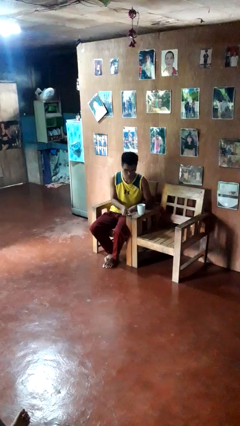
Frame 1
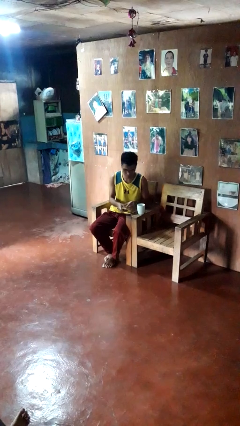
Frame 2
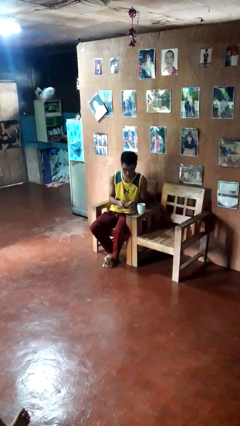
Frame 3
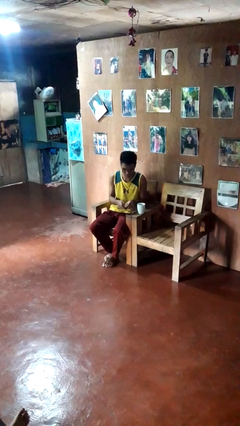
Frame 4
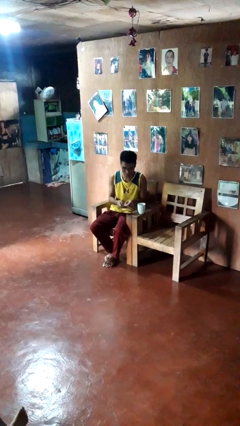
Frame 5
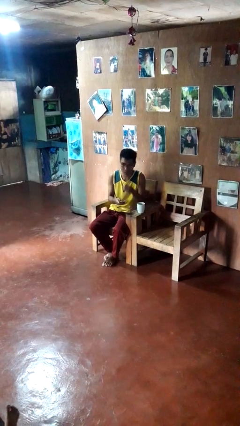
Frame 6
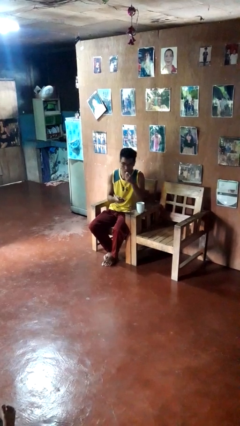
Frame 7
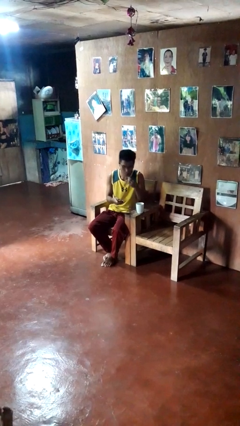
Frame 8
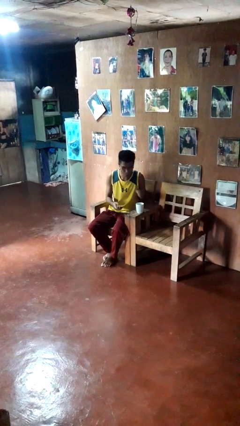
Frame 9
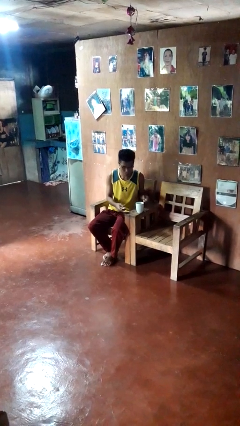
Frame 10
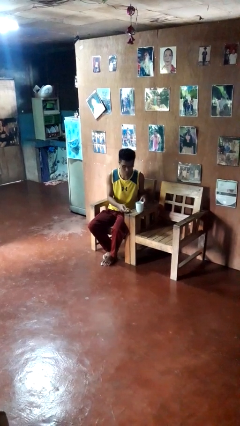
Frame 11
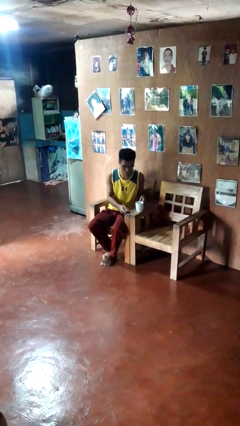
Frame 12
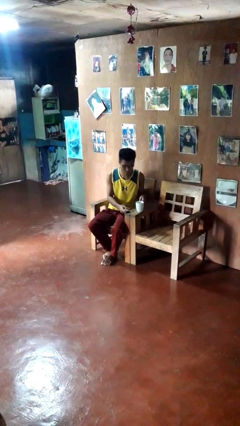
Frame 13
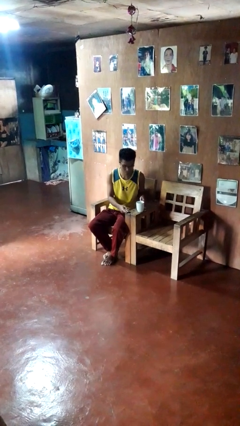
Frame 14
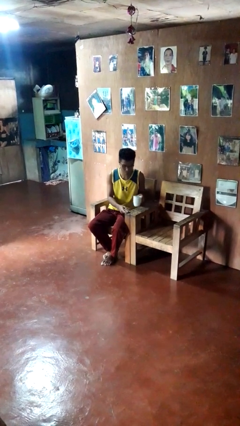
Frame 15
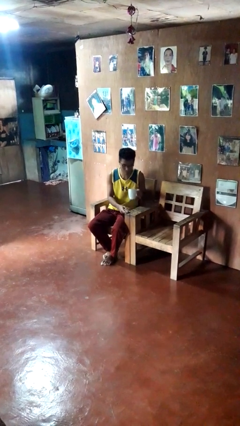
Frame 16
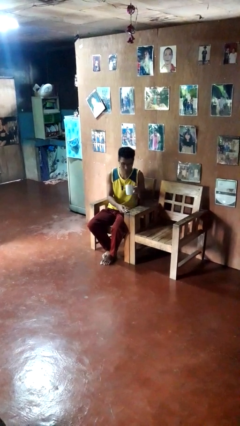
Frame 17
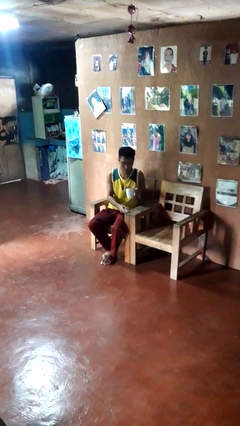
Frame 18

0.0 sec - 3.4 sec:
person takes medicine pills

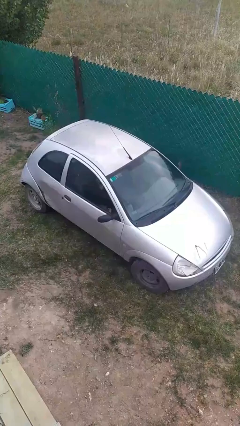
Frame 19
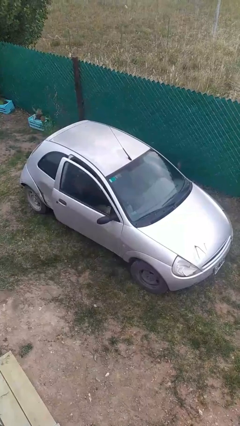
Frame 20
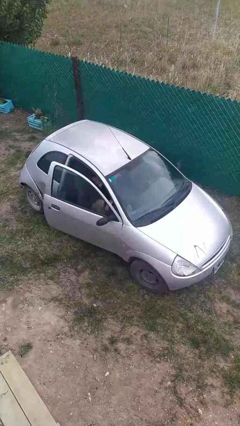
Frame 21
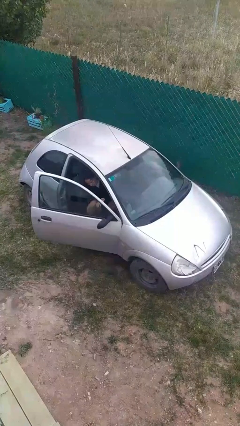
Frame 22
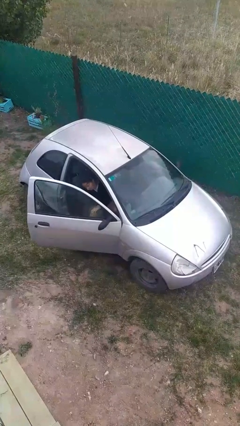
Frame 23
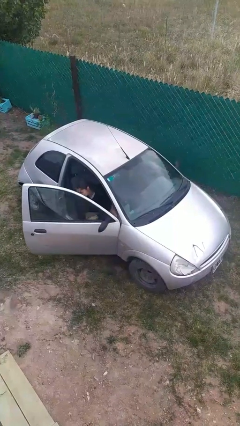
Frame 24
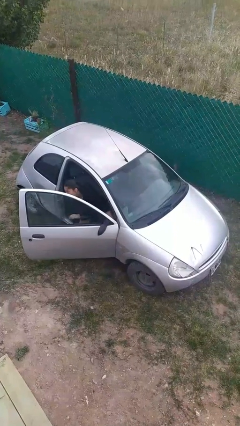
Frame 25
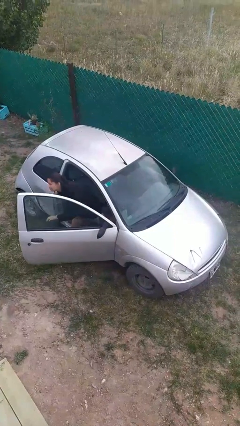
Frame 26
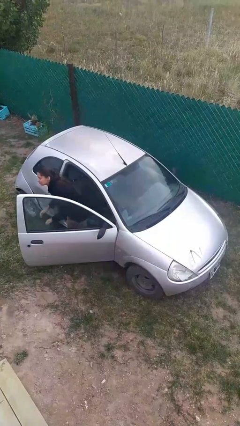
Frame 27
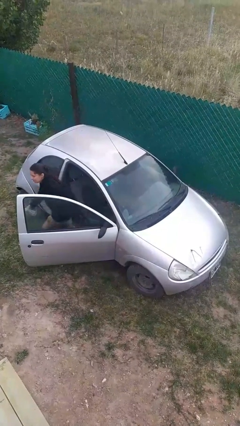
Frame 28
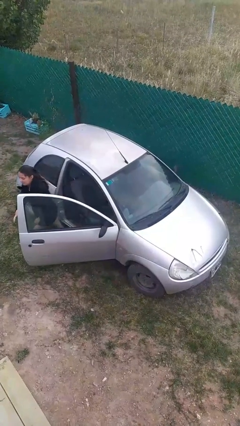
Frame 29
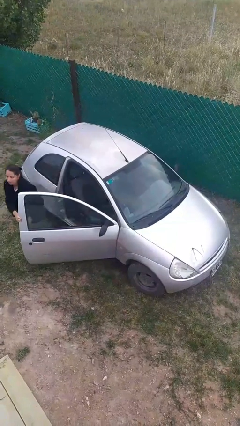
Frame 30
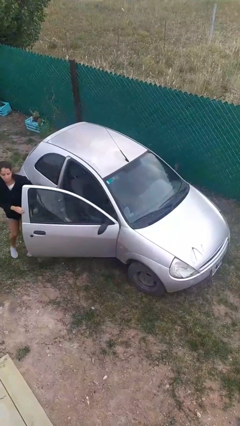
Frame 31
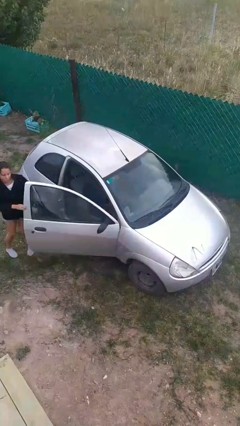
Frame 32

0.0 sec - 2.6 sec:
car drops off person

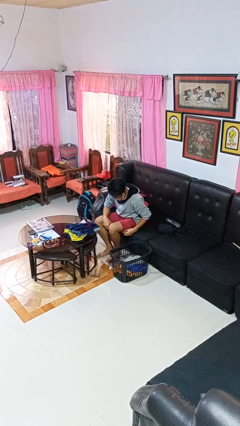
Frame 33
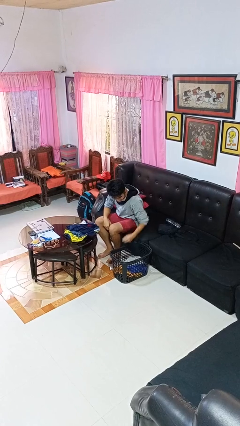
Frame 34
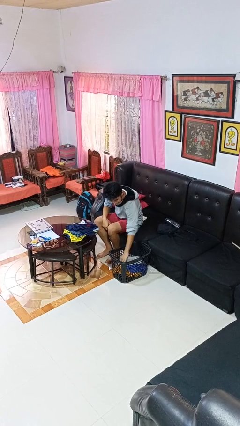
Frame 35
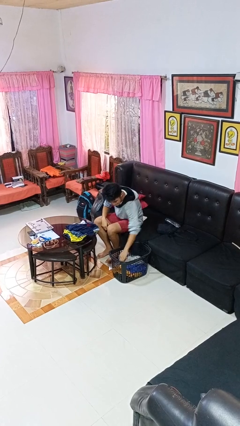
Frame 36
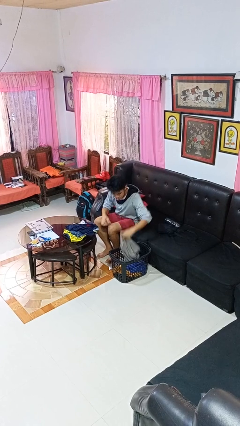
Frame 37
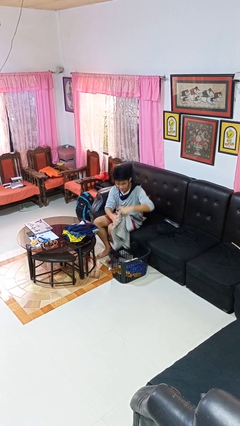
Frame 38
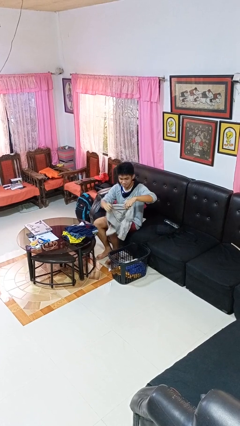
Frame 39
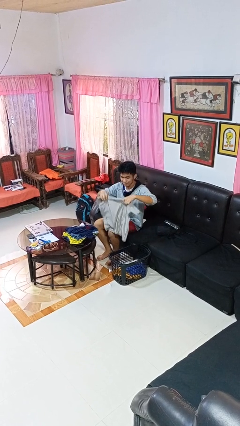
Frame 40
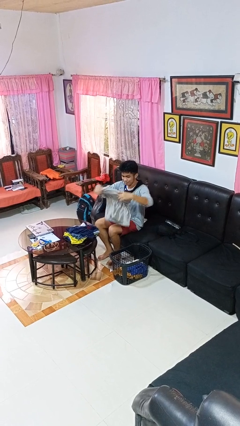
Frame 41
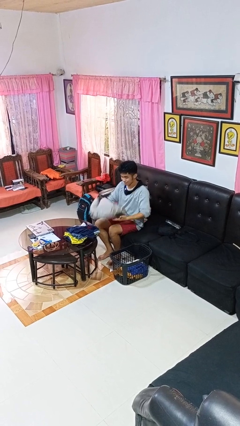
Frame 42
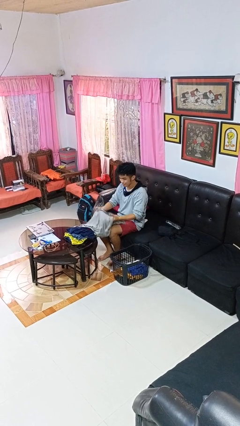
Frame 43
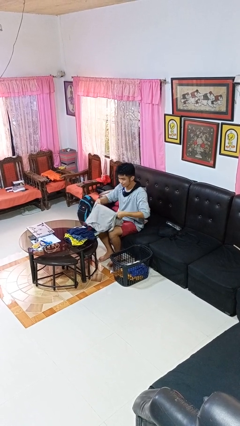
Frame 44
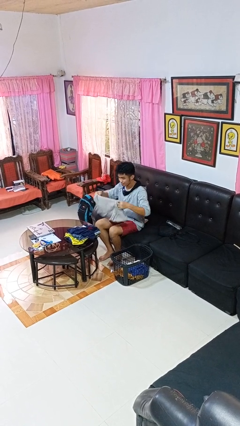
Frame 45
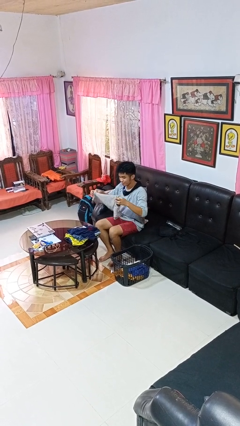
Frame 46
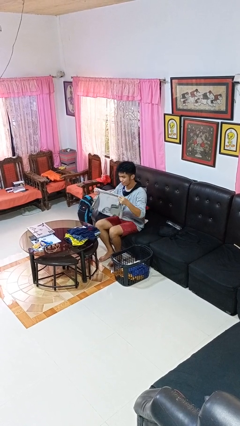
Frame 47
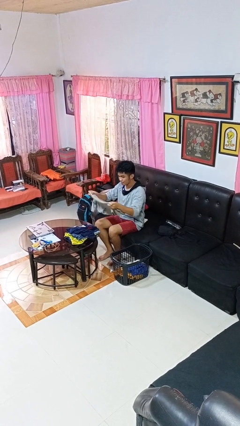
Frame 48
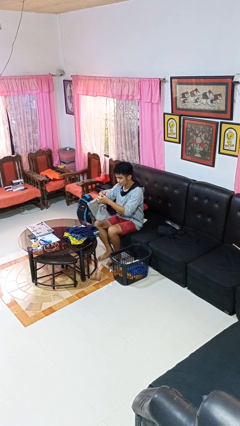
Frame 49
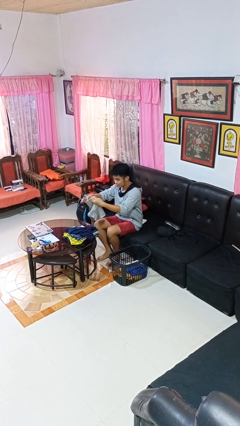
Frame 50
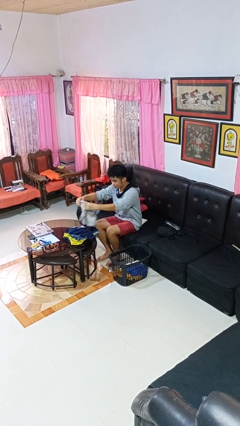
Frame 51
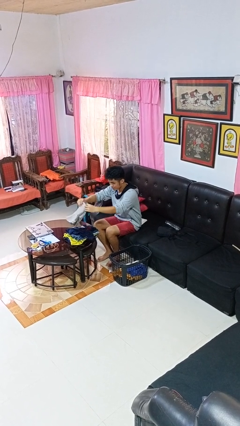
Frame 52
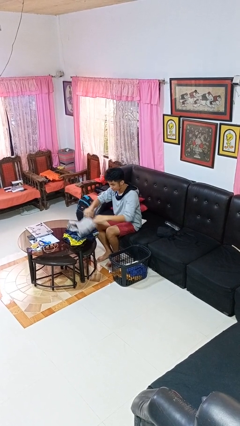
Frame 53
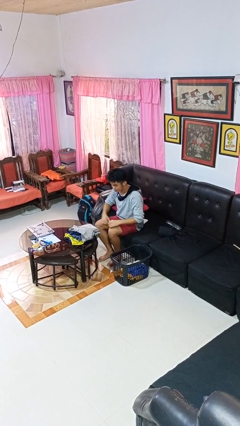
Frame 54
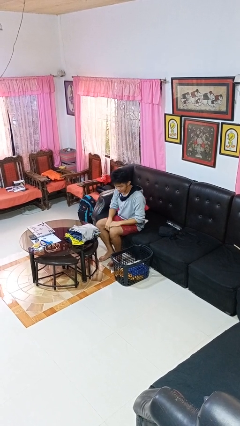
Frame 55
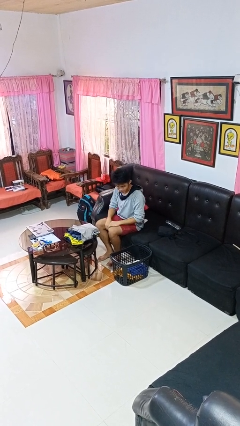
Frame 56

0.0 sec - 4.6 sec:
person folds shirt

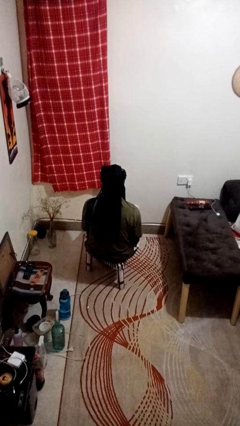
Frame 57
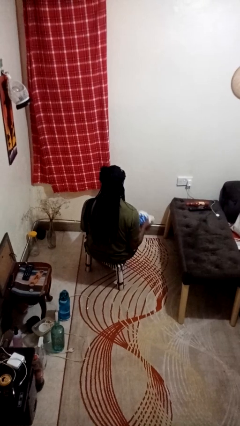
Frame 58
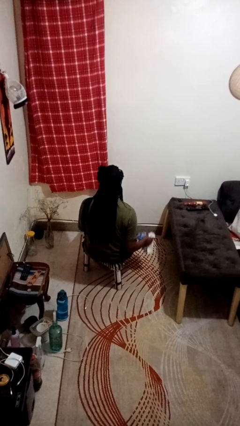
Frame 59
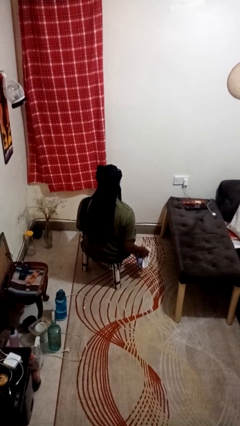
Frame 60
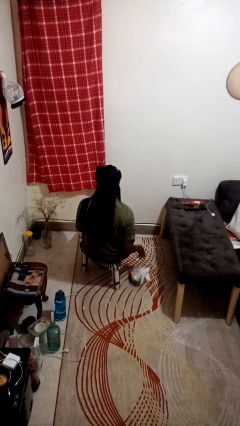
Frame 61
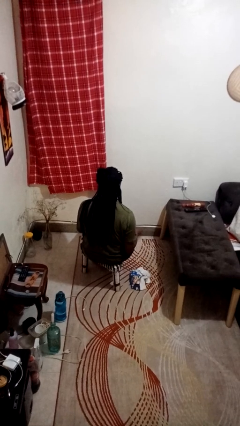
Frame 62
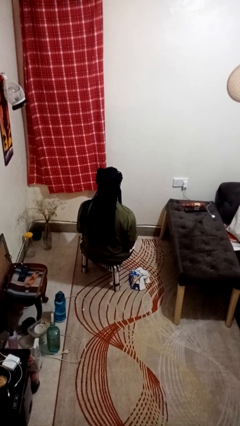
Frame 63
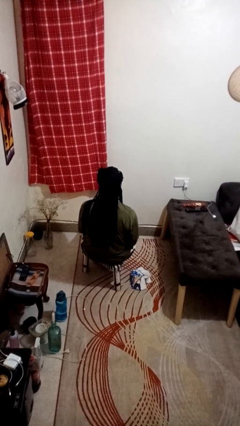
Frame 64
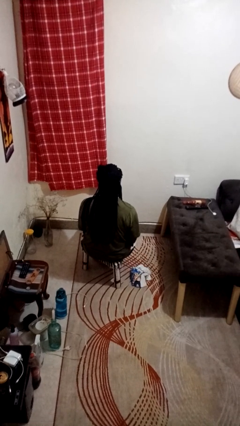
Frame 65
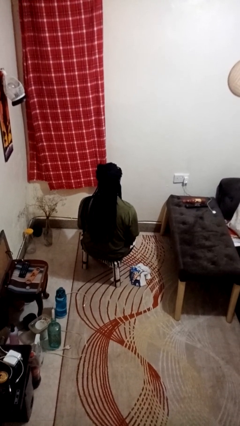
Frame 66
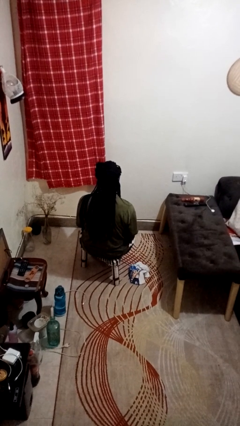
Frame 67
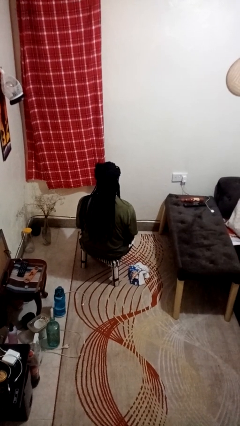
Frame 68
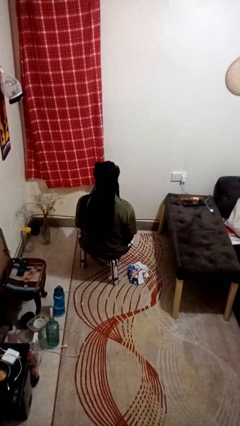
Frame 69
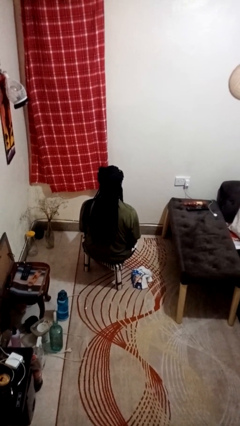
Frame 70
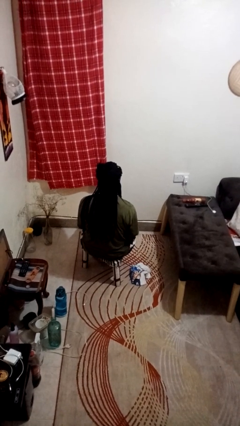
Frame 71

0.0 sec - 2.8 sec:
person throws object to ground

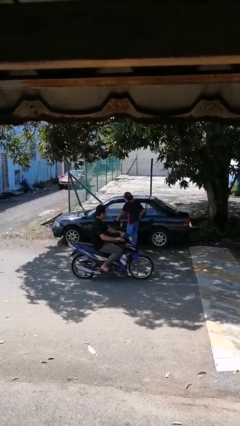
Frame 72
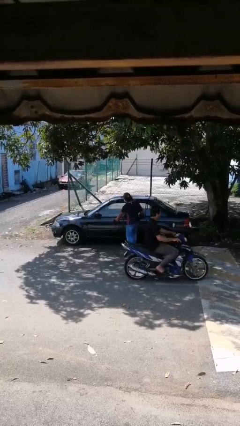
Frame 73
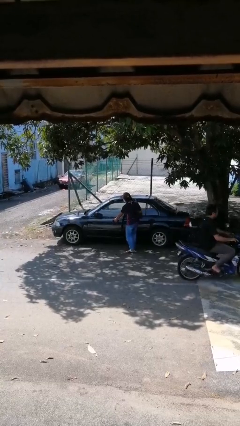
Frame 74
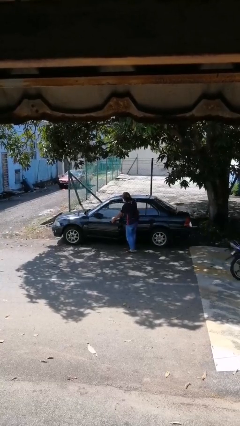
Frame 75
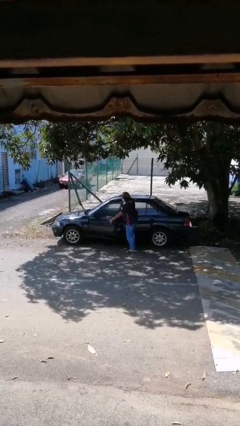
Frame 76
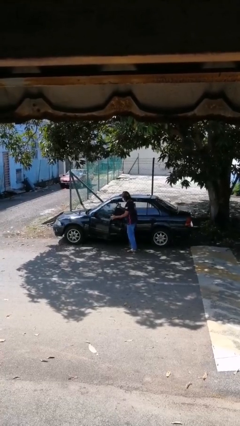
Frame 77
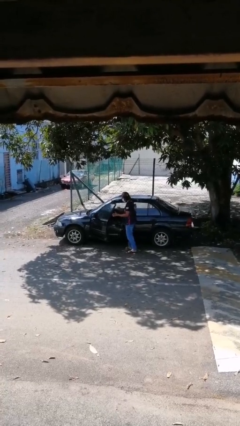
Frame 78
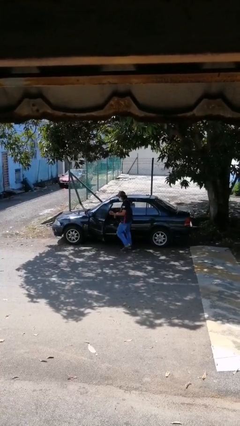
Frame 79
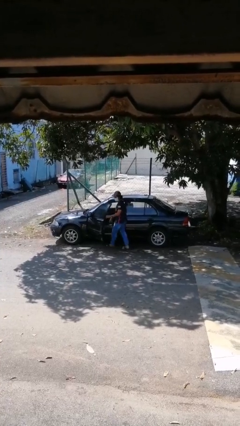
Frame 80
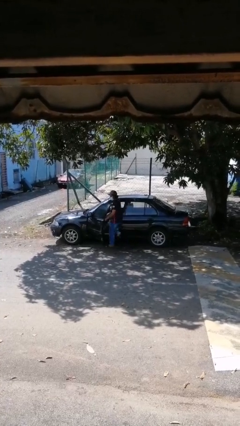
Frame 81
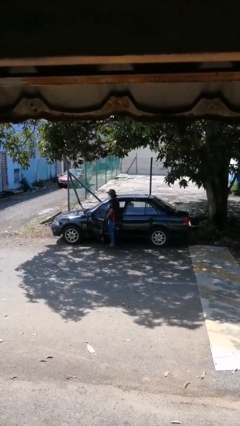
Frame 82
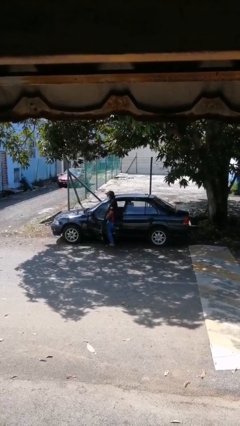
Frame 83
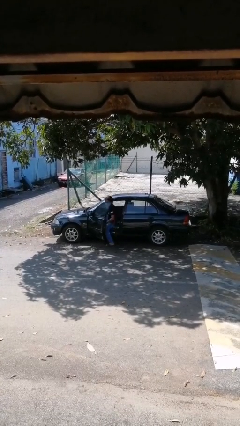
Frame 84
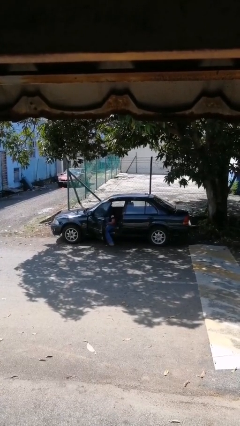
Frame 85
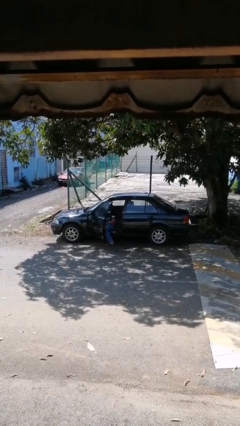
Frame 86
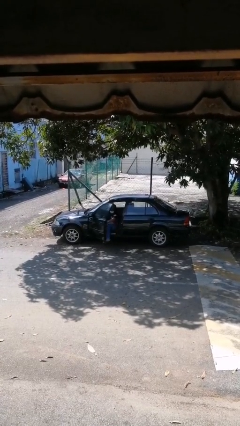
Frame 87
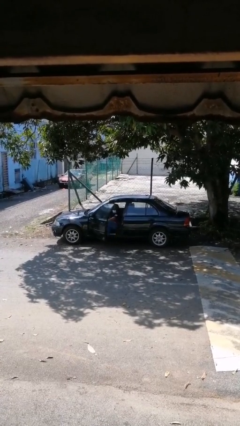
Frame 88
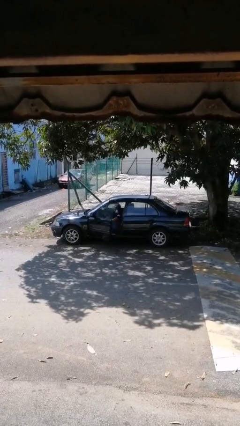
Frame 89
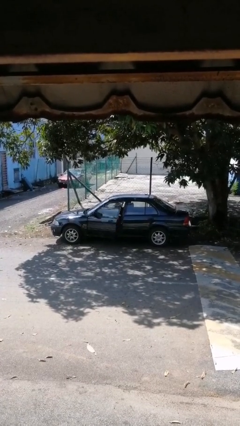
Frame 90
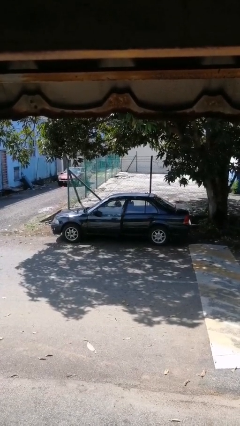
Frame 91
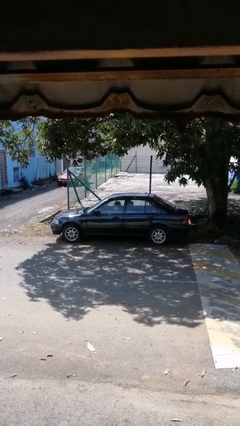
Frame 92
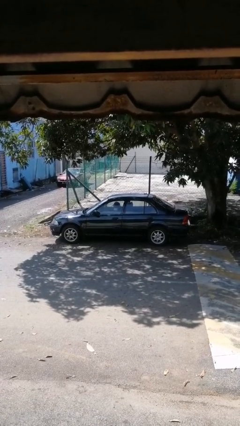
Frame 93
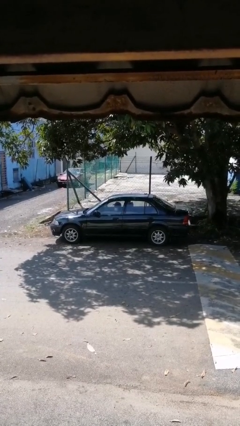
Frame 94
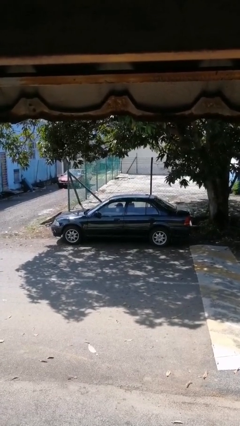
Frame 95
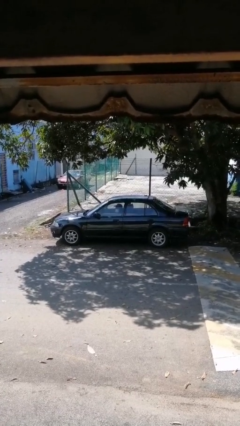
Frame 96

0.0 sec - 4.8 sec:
car picks up person
